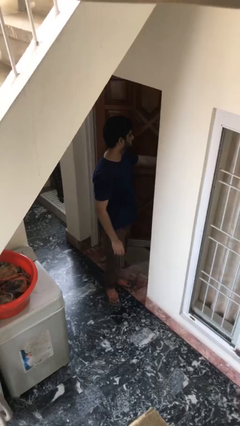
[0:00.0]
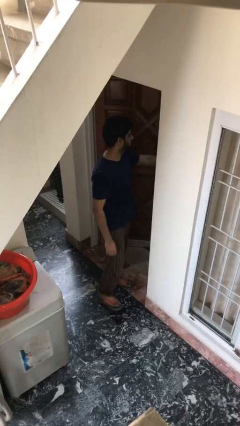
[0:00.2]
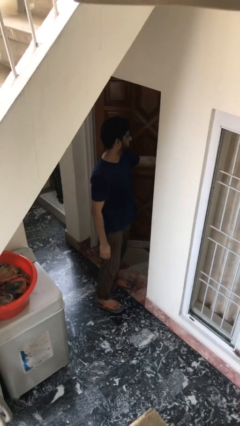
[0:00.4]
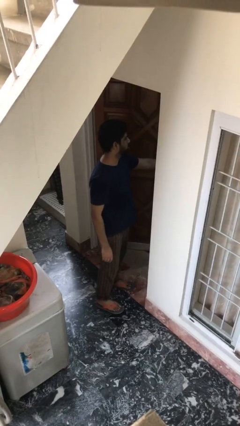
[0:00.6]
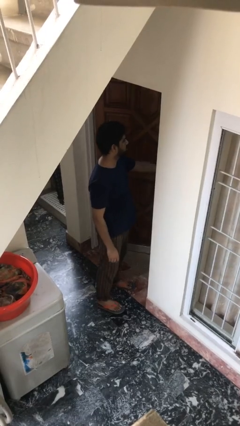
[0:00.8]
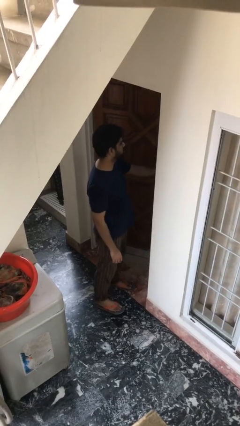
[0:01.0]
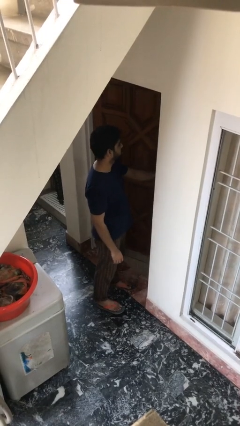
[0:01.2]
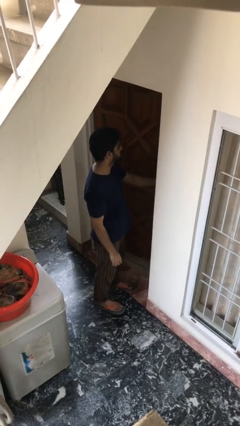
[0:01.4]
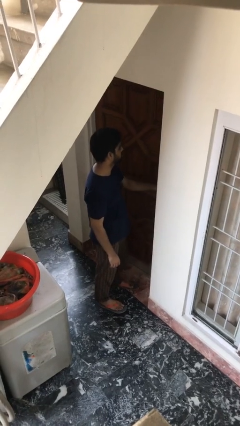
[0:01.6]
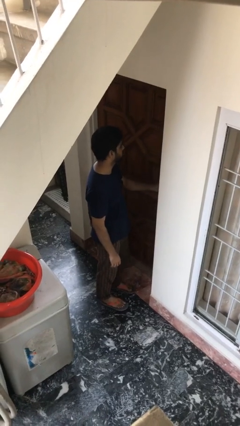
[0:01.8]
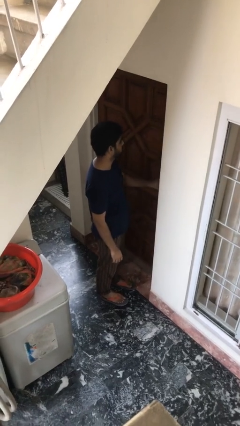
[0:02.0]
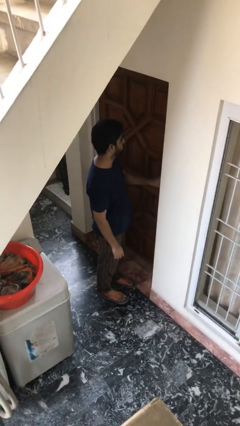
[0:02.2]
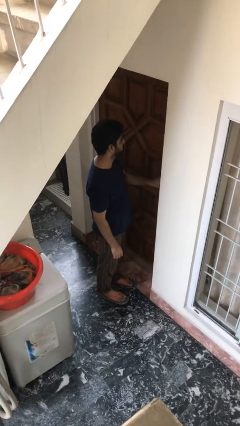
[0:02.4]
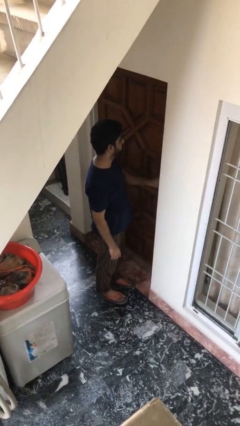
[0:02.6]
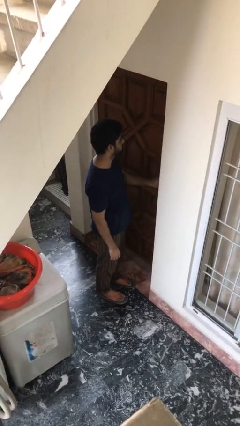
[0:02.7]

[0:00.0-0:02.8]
person closes facility door

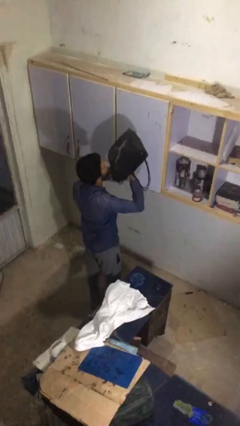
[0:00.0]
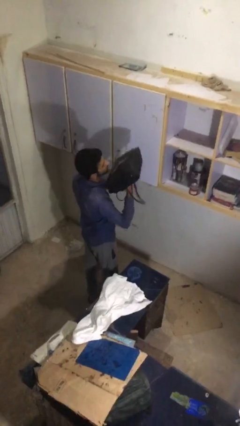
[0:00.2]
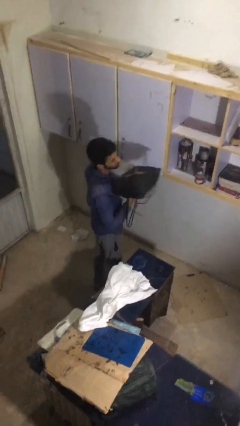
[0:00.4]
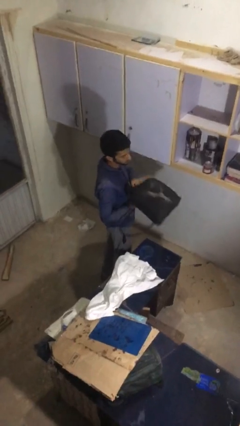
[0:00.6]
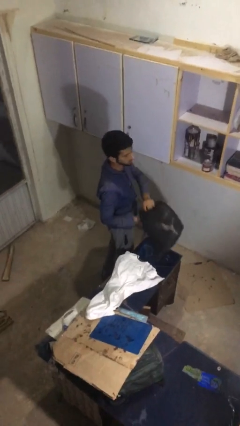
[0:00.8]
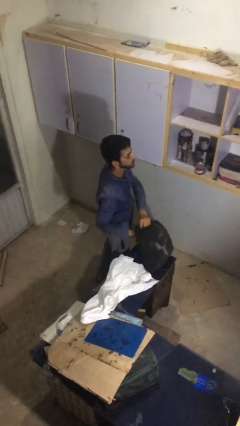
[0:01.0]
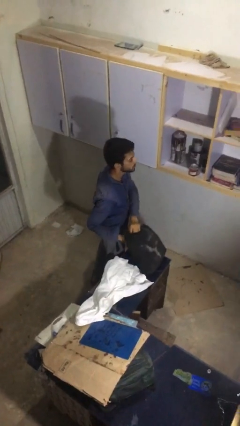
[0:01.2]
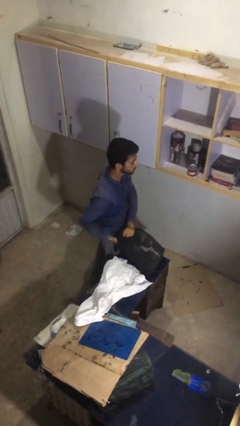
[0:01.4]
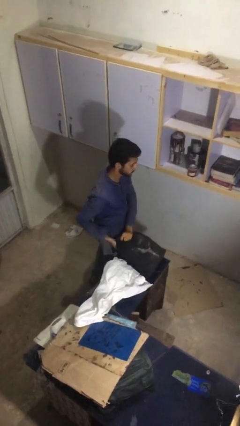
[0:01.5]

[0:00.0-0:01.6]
person puts down object on table

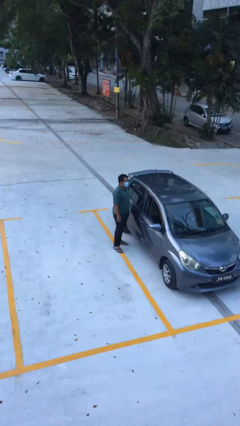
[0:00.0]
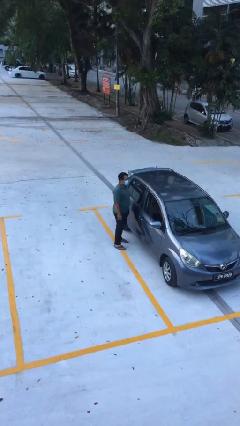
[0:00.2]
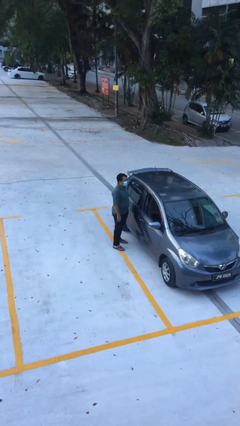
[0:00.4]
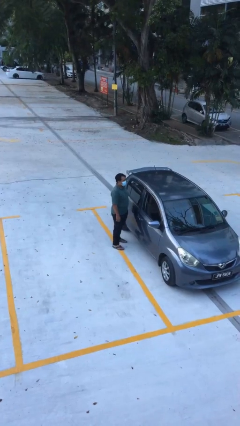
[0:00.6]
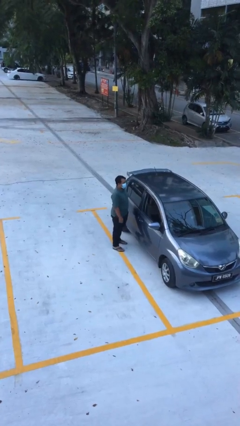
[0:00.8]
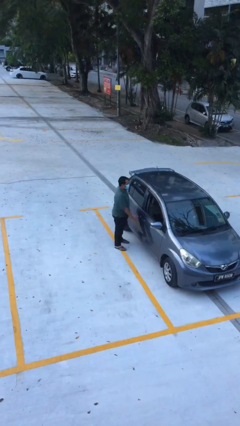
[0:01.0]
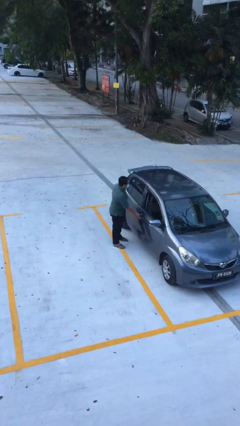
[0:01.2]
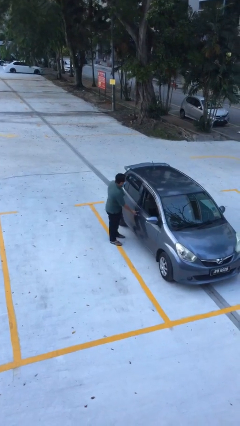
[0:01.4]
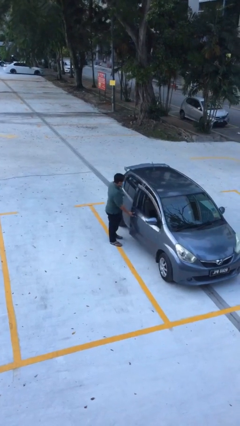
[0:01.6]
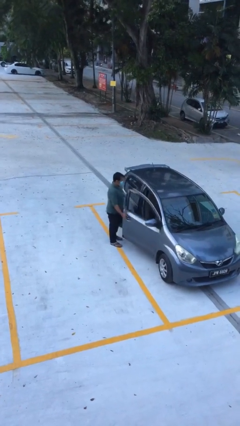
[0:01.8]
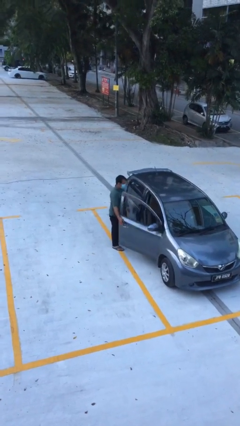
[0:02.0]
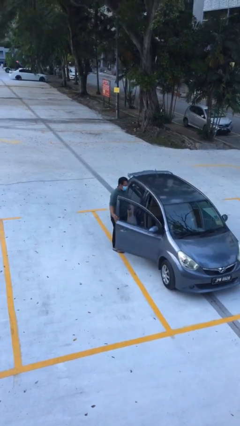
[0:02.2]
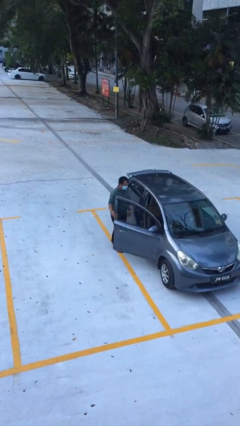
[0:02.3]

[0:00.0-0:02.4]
person opens car door

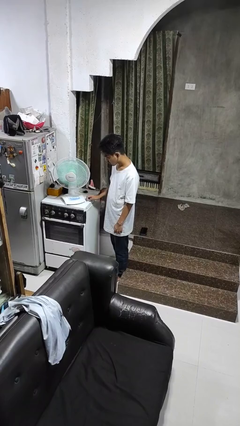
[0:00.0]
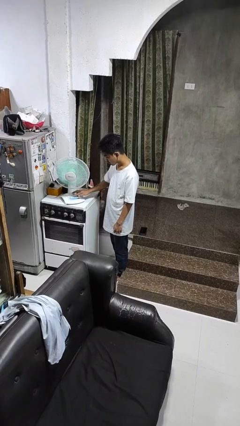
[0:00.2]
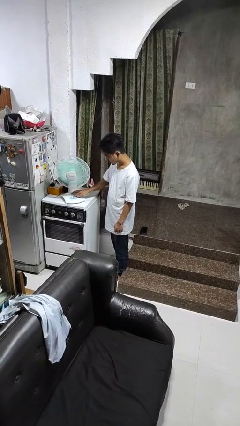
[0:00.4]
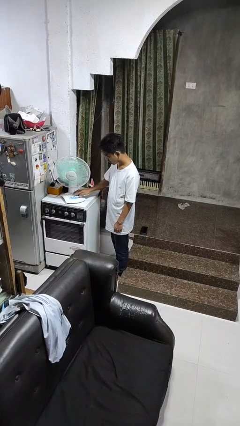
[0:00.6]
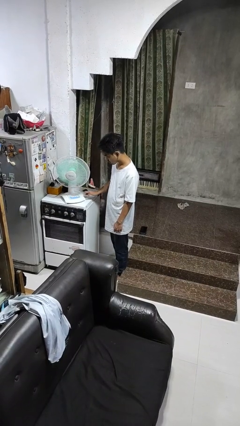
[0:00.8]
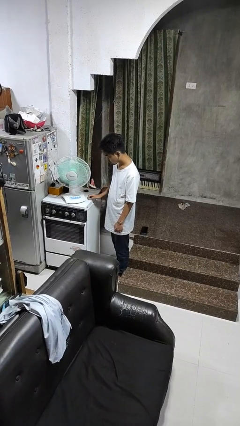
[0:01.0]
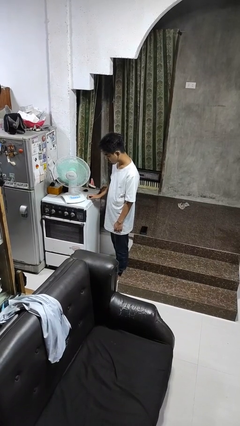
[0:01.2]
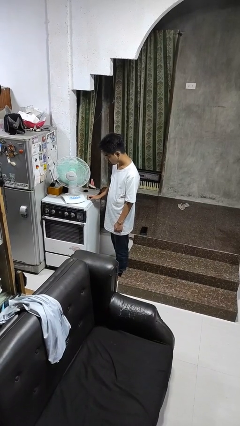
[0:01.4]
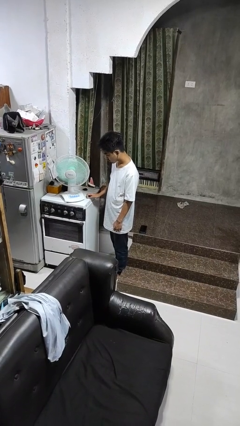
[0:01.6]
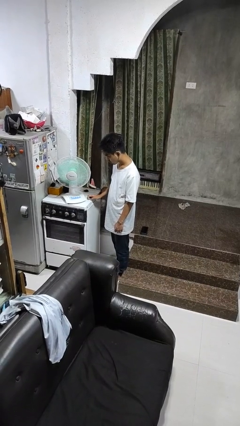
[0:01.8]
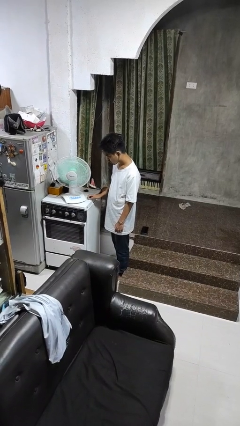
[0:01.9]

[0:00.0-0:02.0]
person turns on fan

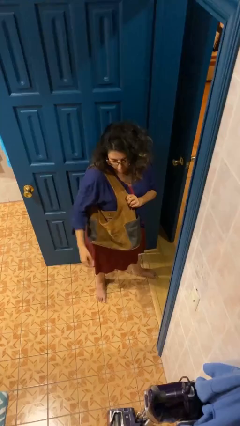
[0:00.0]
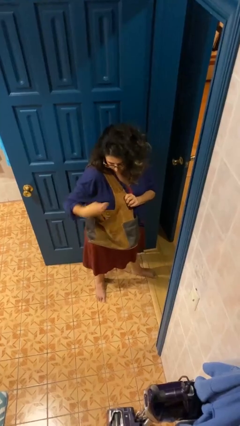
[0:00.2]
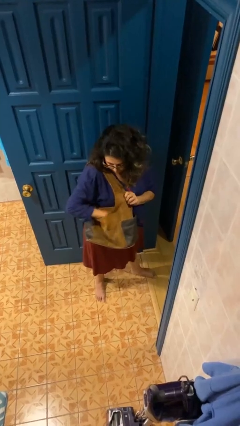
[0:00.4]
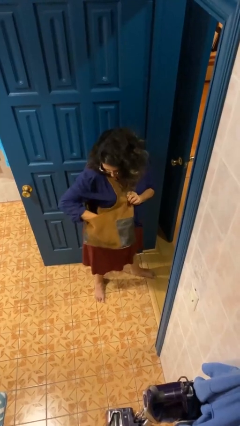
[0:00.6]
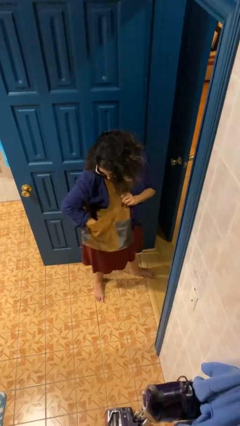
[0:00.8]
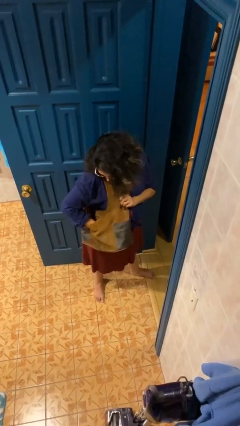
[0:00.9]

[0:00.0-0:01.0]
person searches in purse

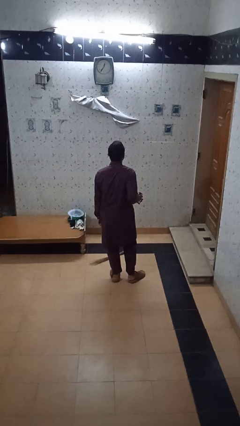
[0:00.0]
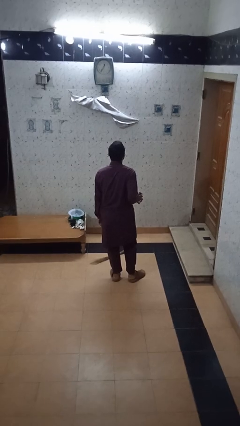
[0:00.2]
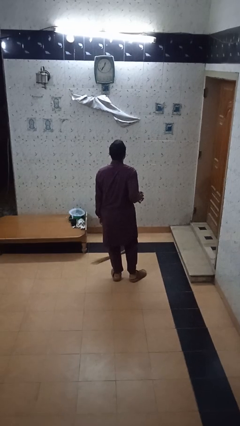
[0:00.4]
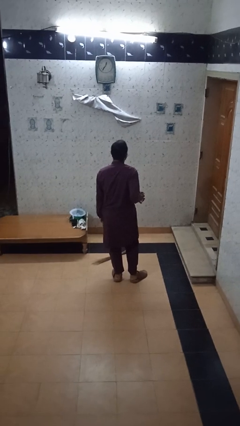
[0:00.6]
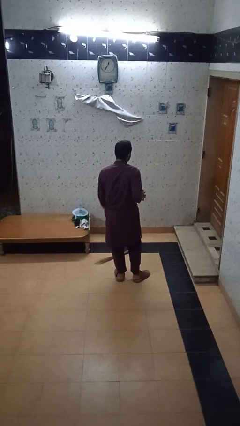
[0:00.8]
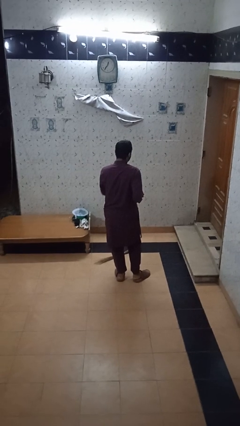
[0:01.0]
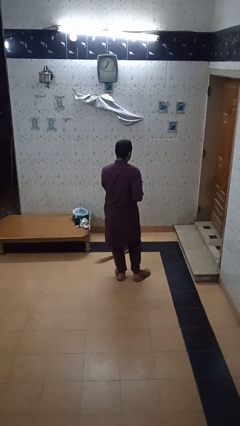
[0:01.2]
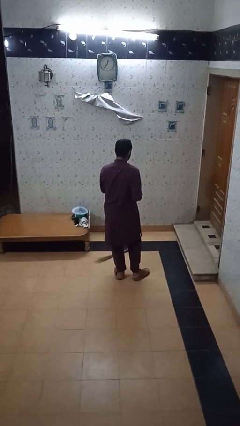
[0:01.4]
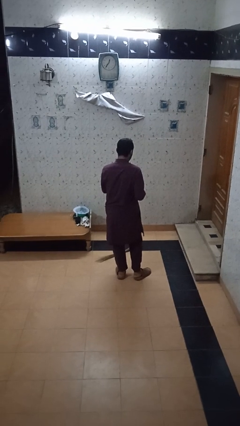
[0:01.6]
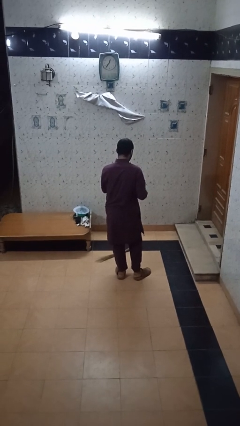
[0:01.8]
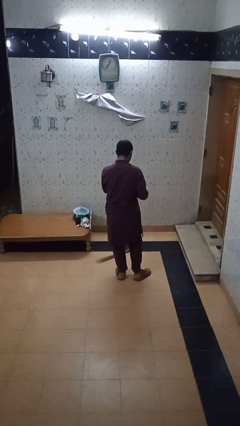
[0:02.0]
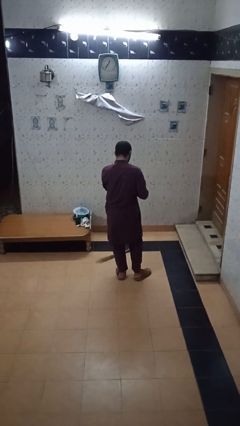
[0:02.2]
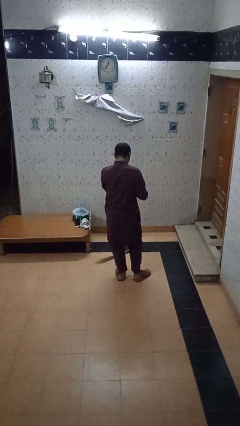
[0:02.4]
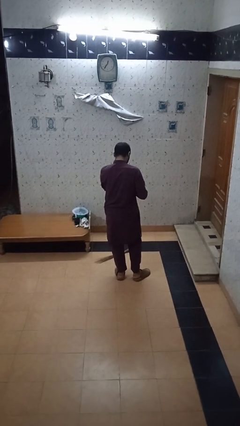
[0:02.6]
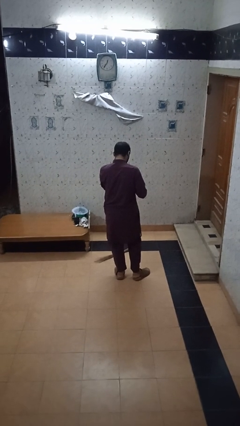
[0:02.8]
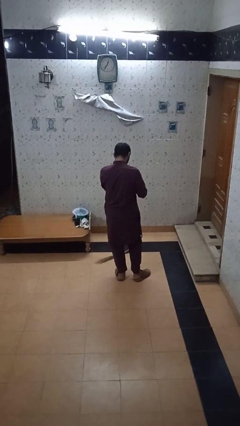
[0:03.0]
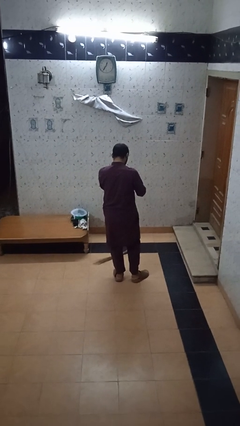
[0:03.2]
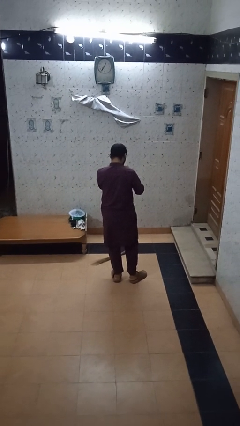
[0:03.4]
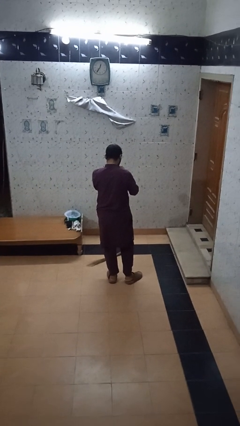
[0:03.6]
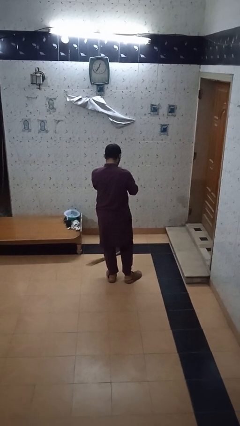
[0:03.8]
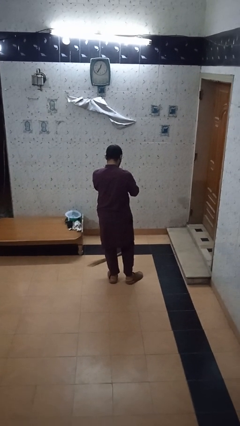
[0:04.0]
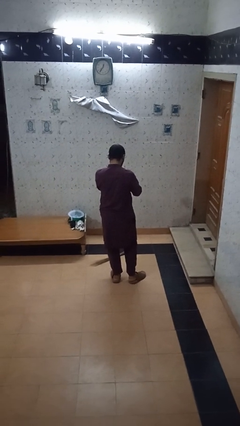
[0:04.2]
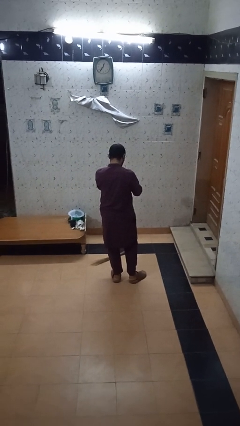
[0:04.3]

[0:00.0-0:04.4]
person drinks from straw

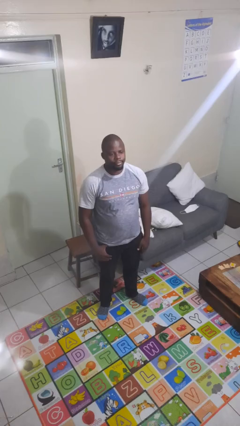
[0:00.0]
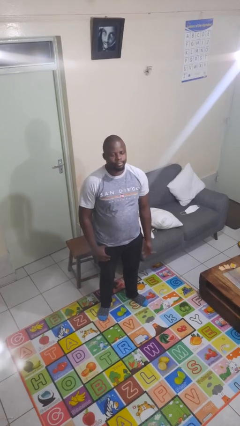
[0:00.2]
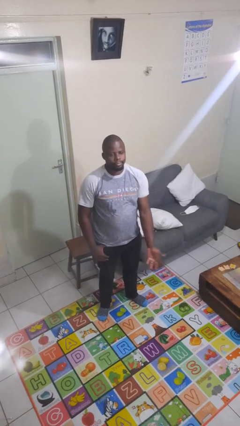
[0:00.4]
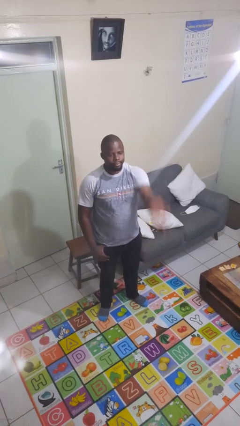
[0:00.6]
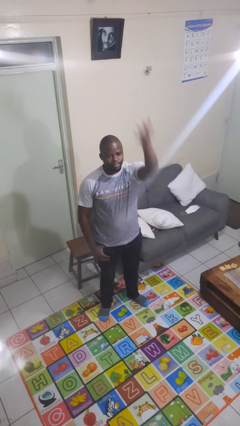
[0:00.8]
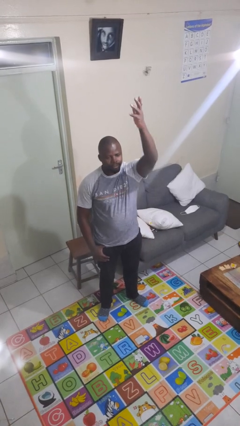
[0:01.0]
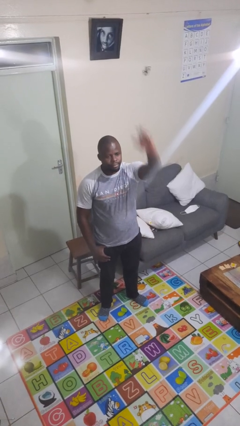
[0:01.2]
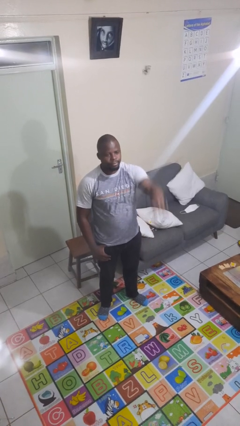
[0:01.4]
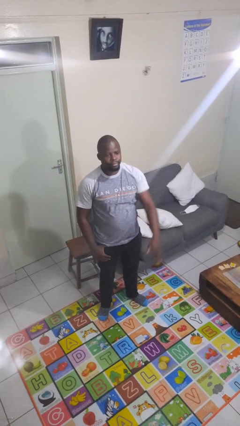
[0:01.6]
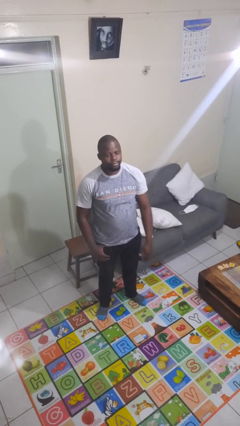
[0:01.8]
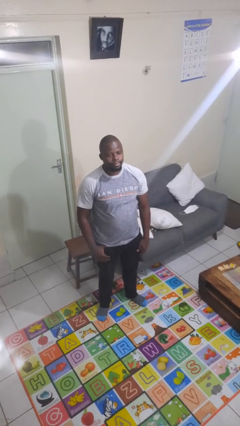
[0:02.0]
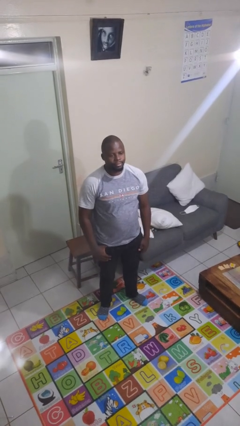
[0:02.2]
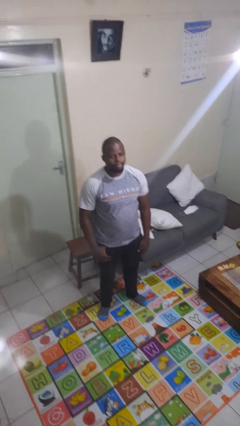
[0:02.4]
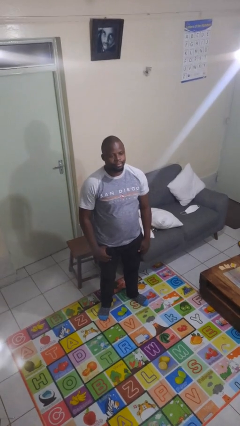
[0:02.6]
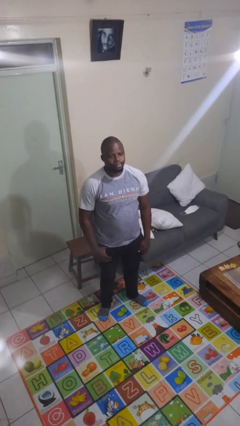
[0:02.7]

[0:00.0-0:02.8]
person gestures swipe up

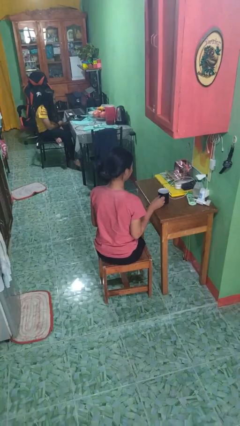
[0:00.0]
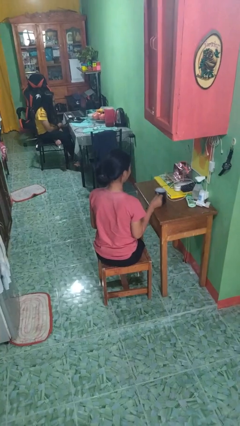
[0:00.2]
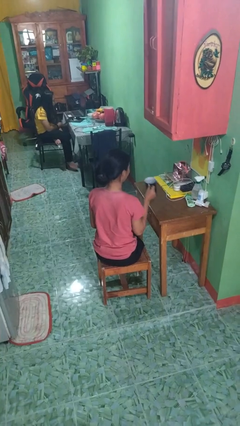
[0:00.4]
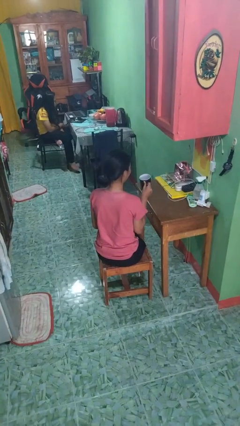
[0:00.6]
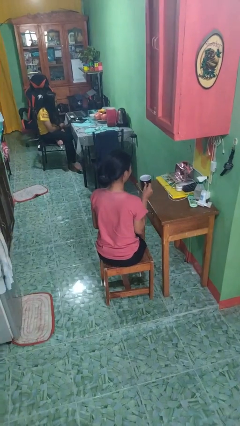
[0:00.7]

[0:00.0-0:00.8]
person picks up object from table
